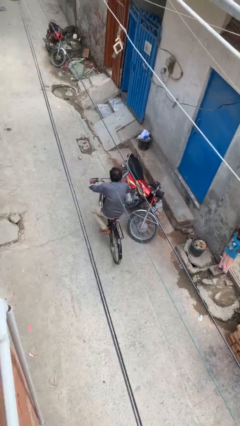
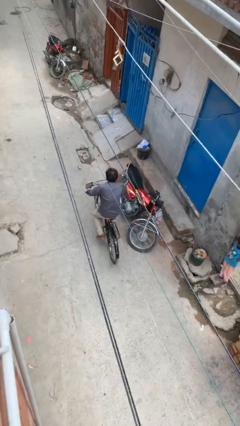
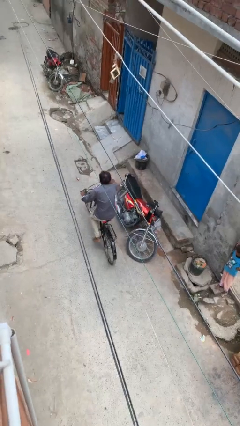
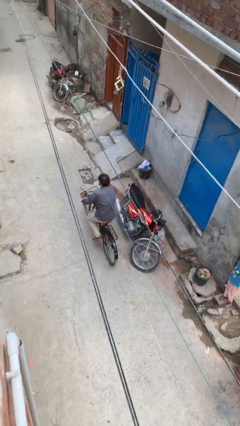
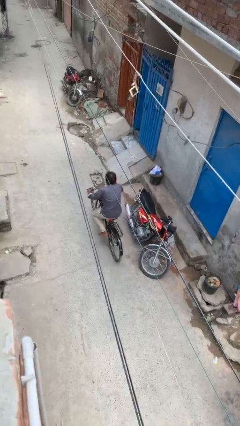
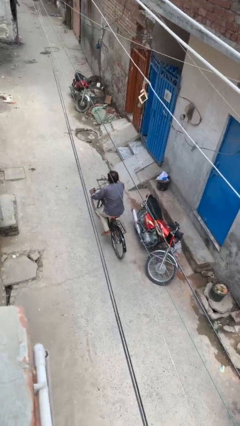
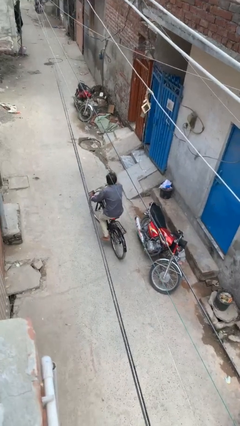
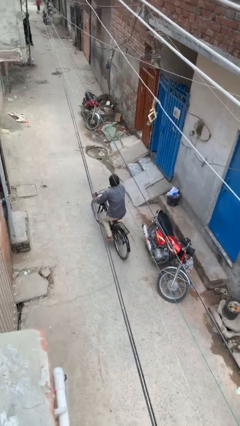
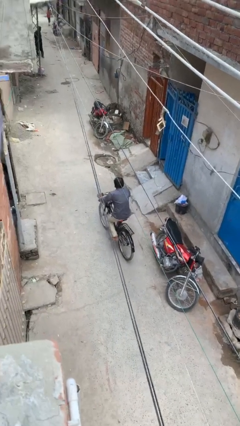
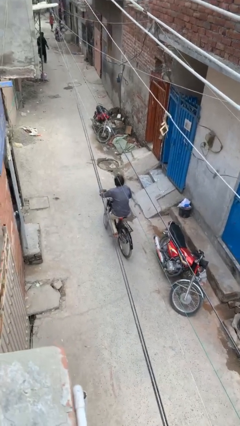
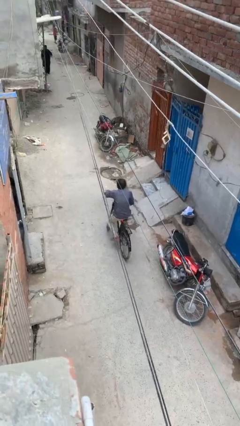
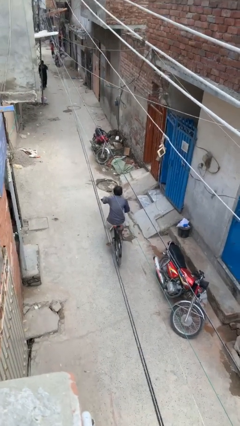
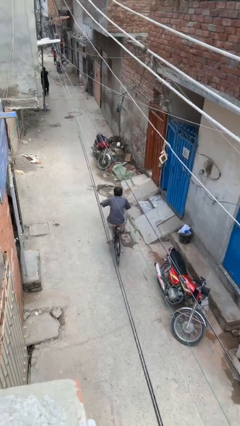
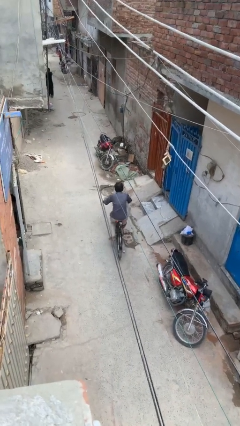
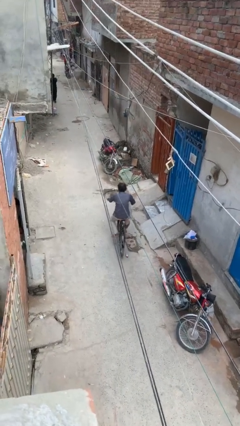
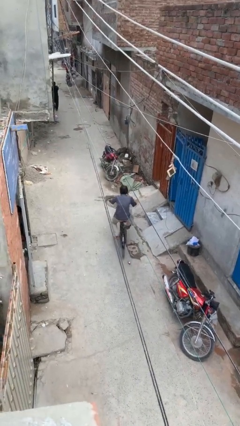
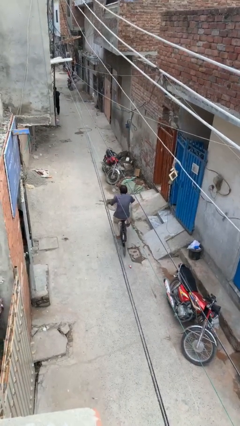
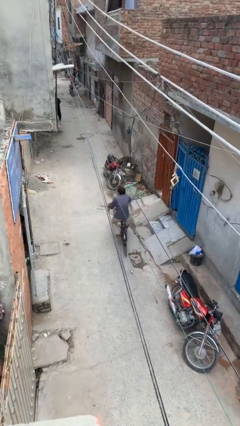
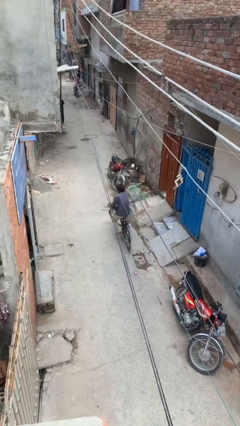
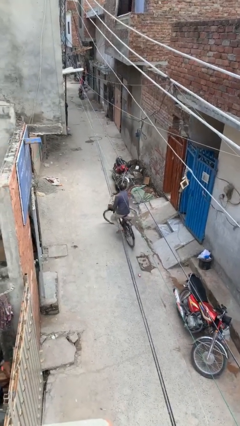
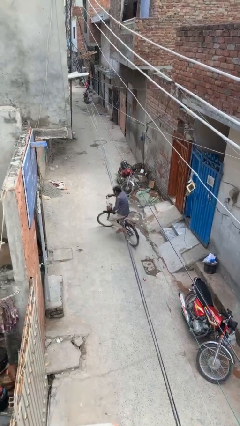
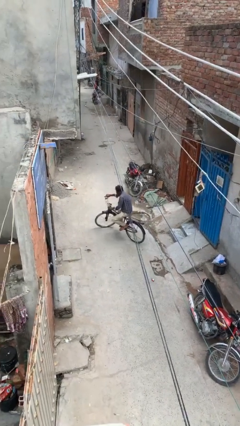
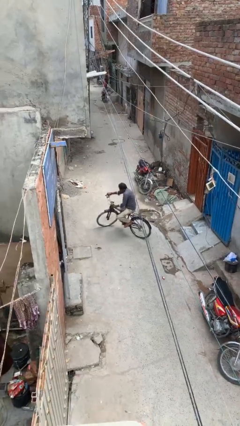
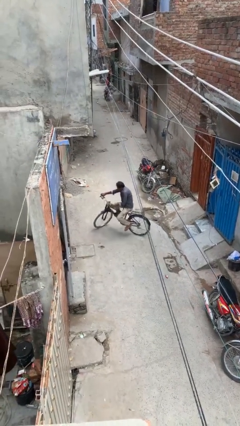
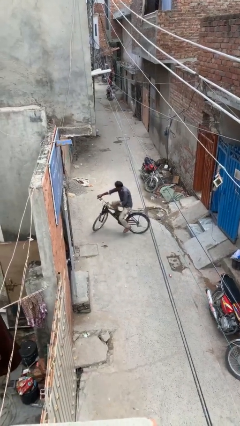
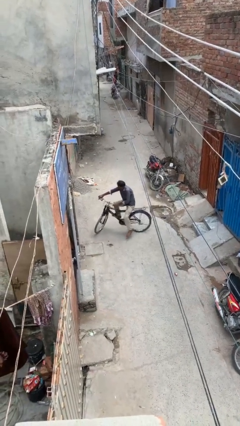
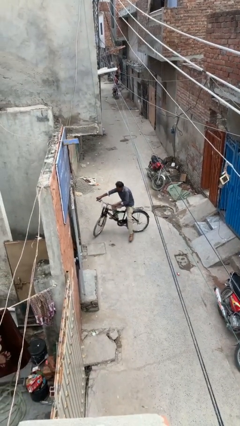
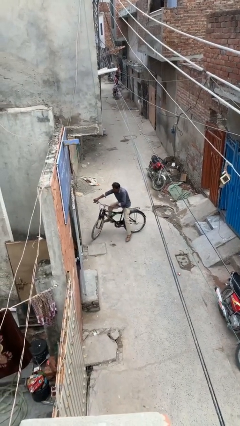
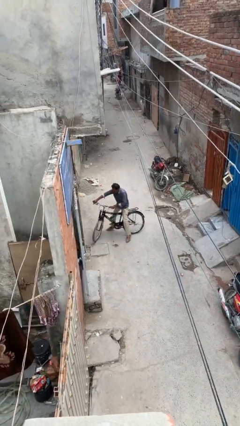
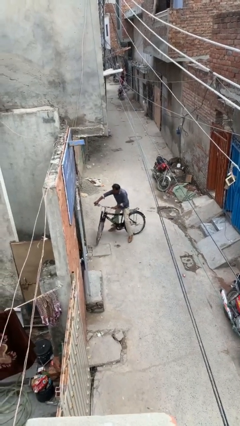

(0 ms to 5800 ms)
person rides bicycle

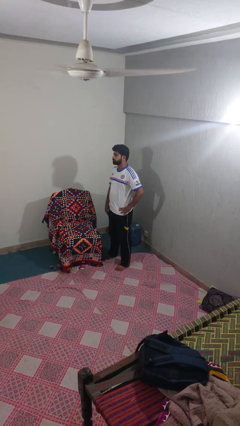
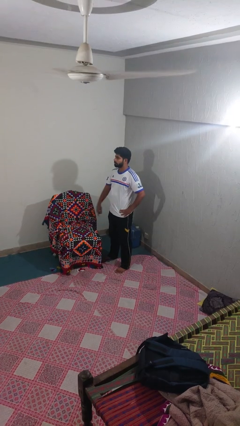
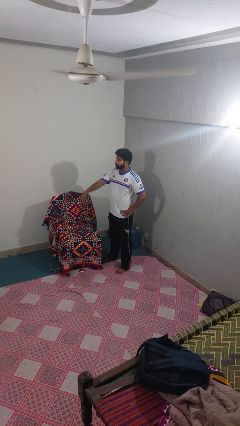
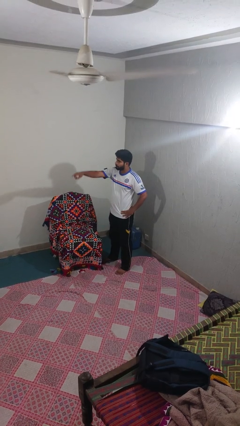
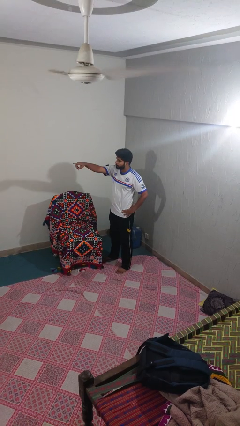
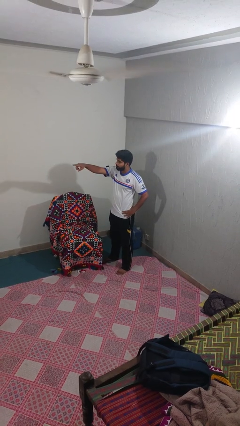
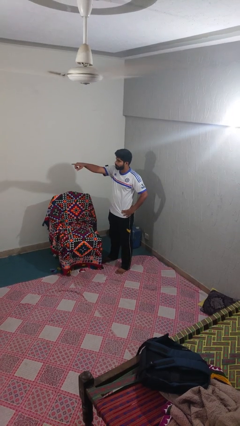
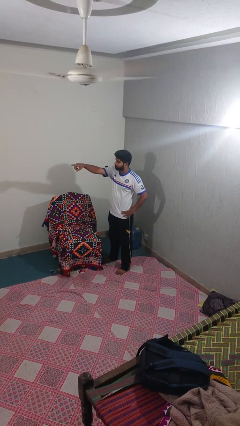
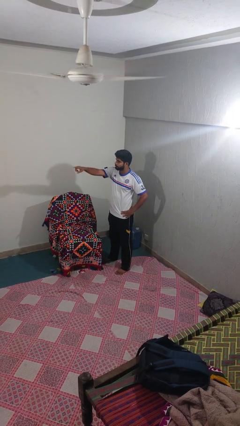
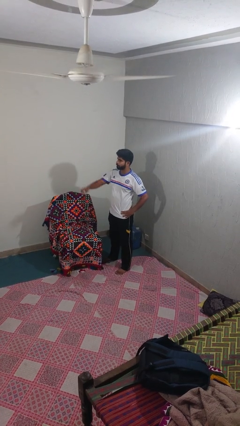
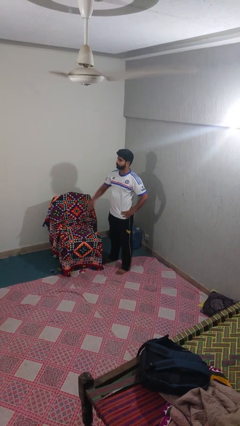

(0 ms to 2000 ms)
person points at person

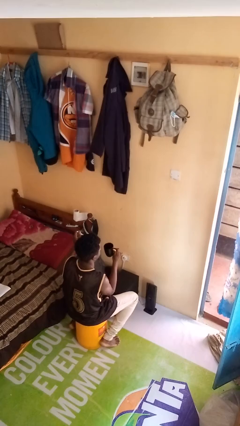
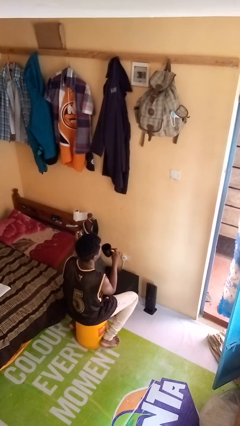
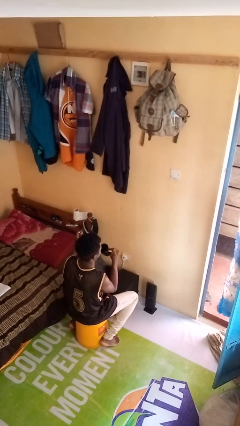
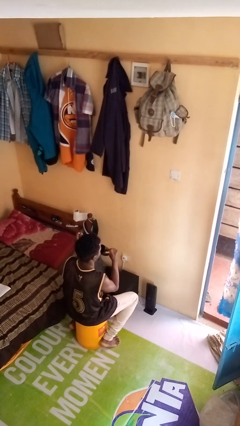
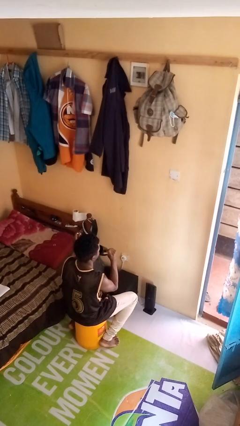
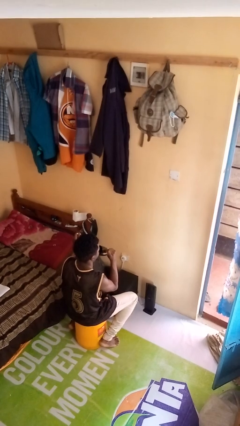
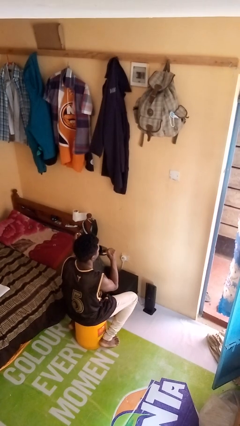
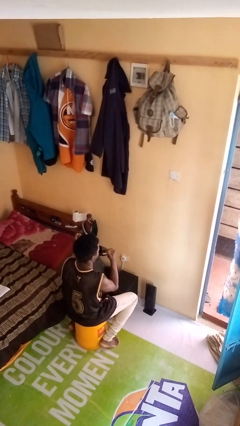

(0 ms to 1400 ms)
person drinks from mug

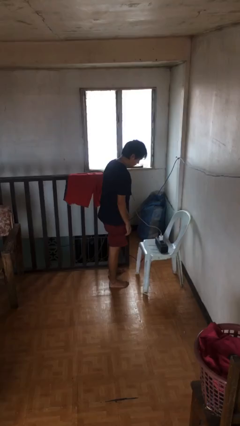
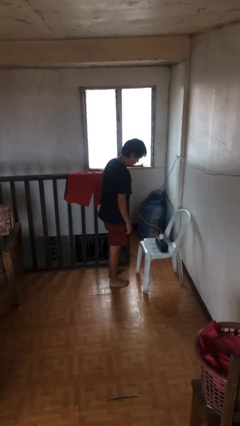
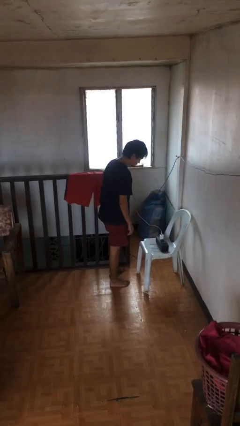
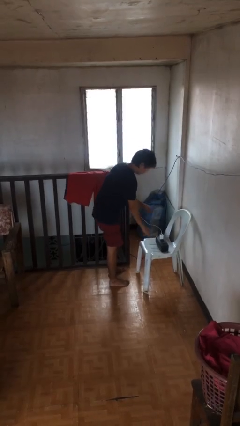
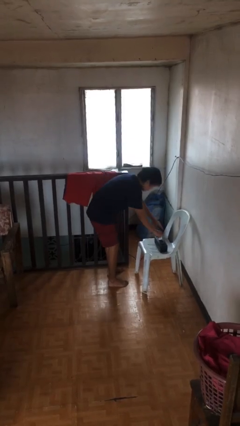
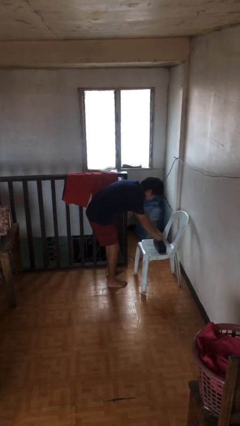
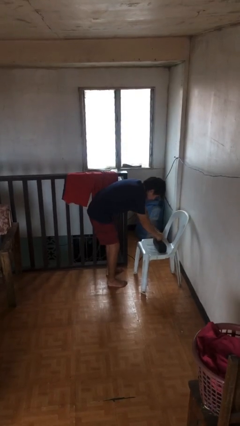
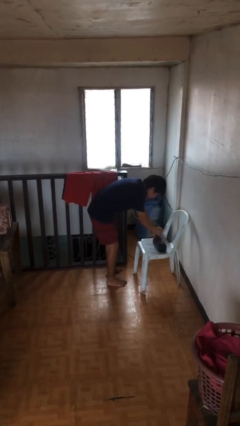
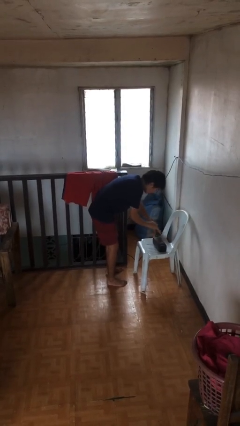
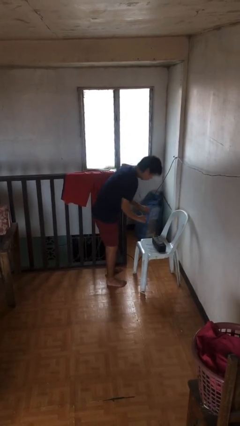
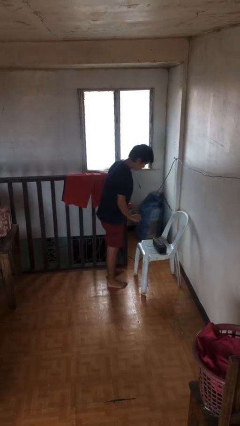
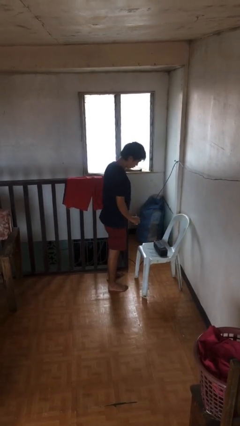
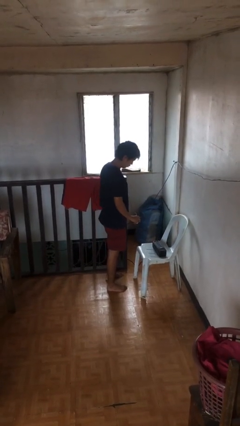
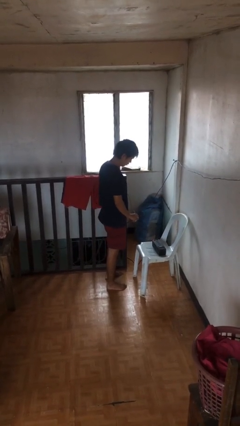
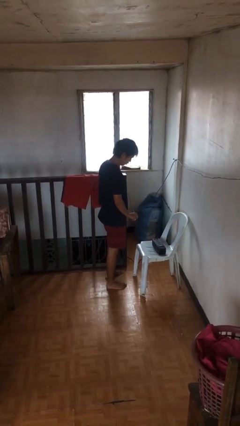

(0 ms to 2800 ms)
person unplugs from electrical socket

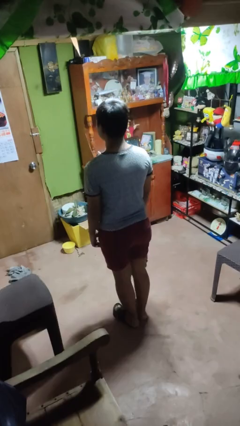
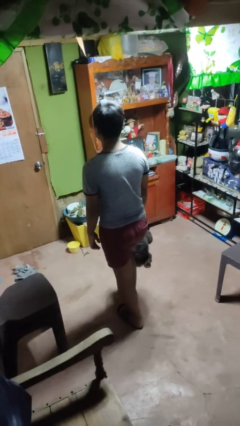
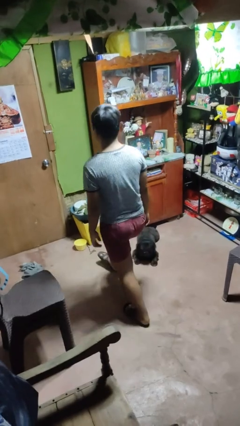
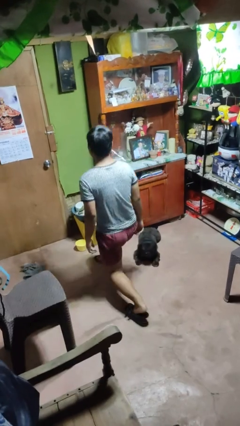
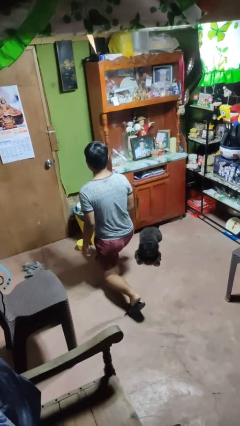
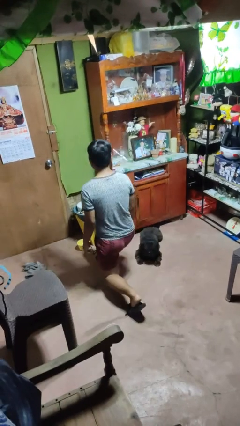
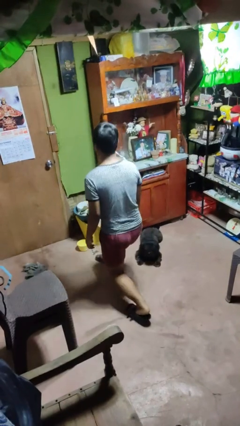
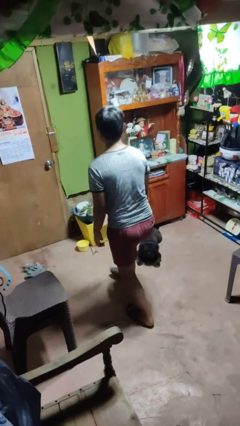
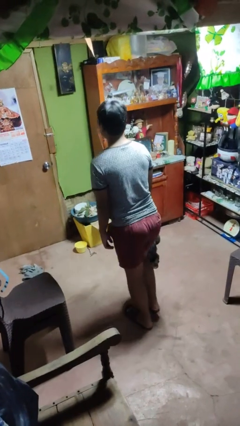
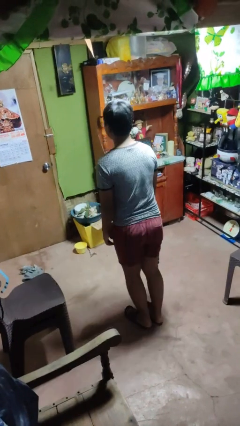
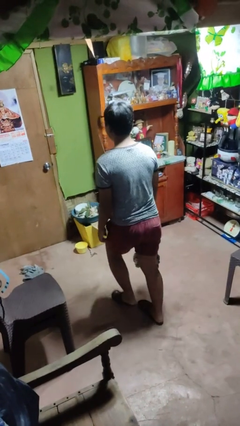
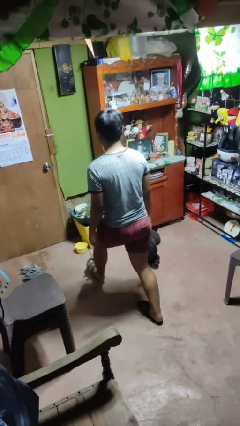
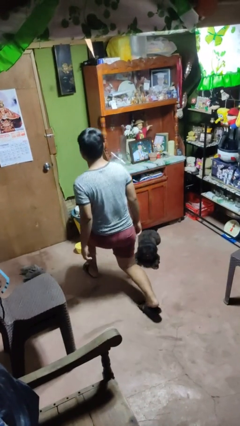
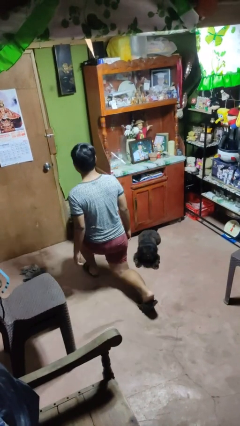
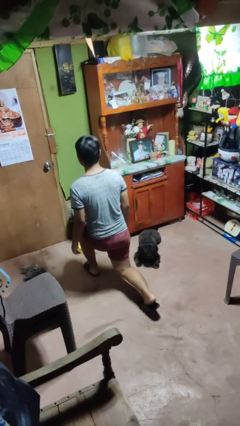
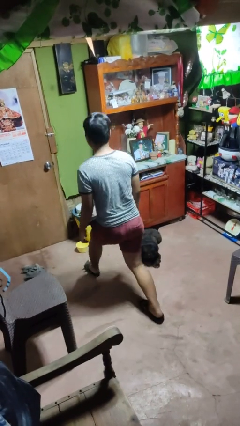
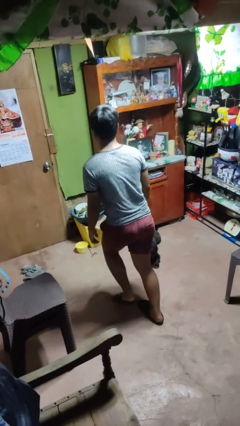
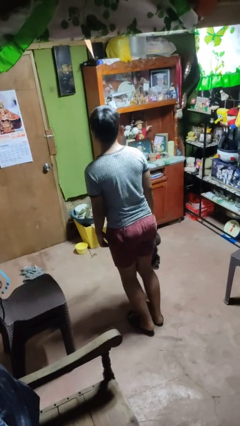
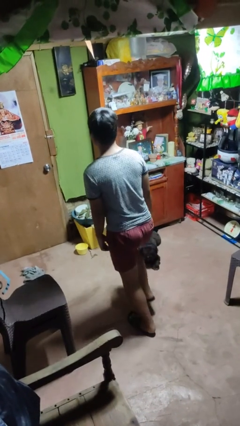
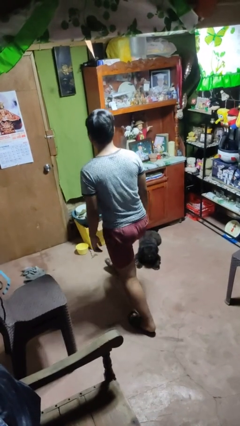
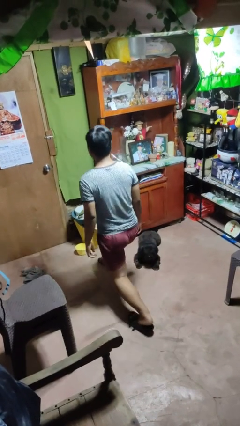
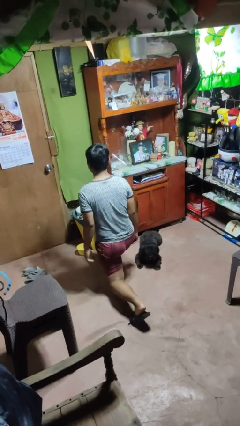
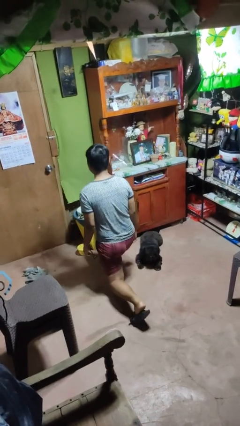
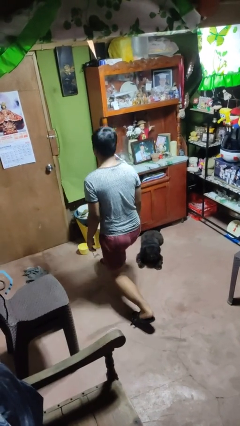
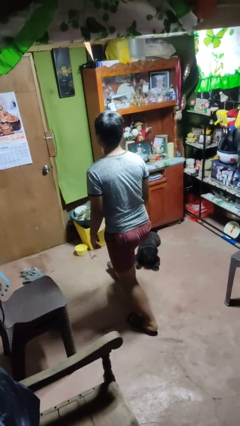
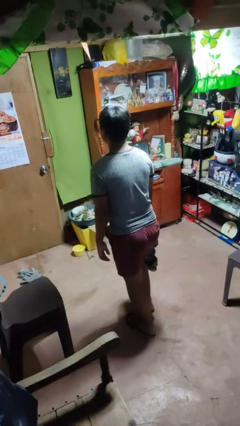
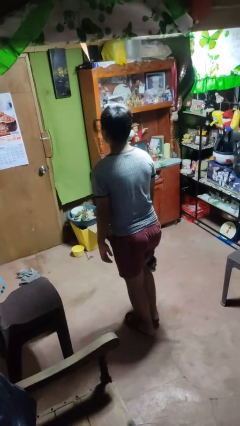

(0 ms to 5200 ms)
person exercises with lunges

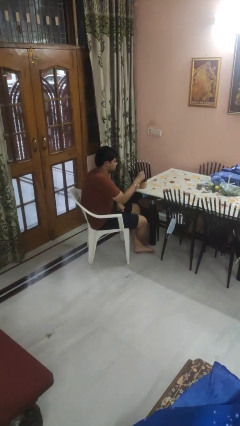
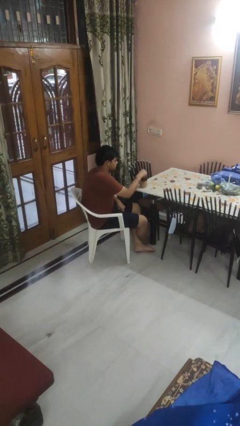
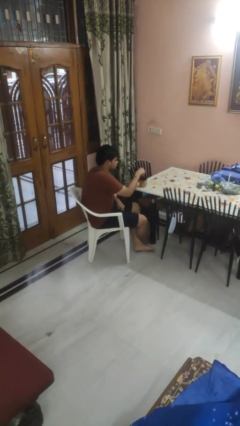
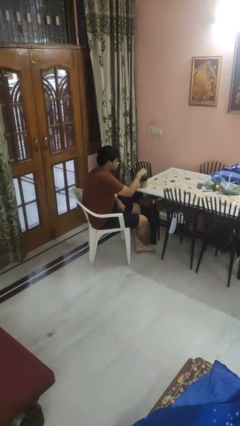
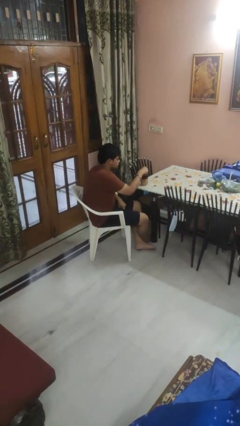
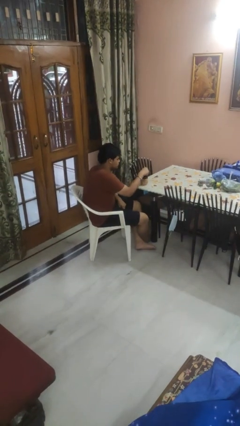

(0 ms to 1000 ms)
person stirs mug
